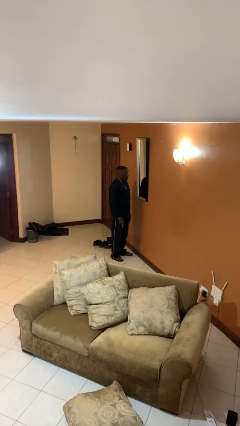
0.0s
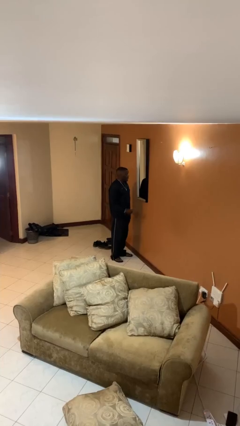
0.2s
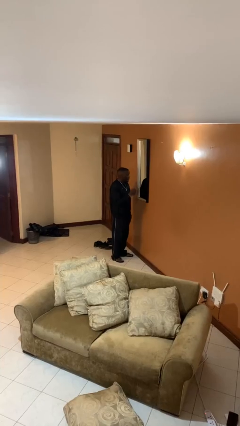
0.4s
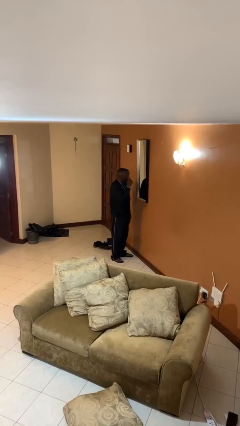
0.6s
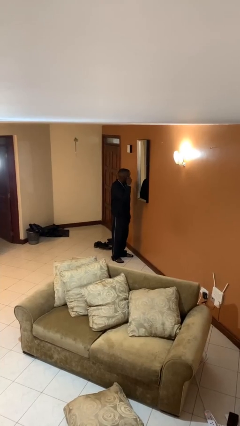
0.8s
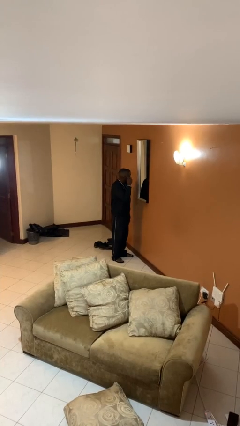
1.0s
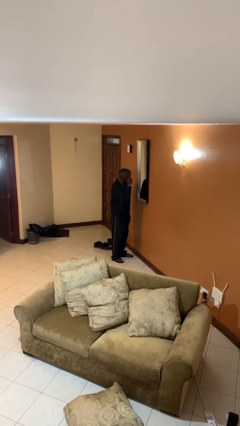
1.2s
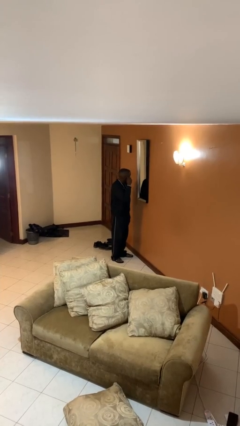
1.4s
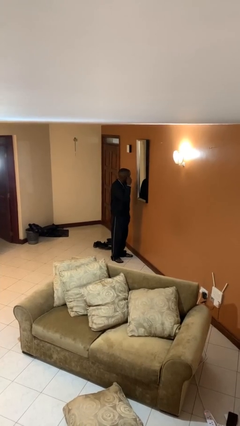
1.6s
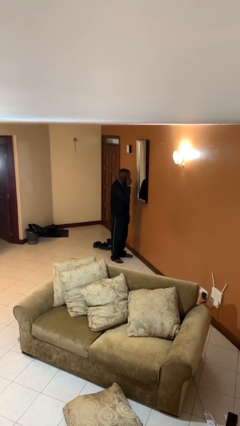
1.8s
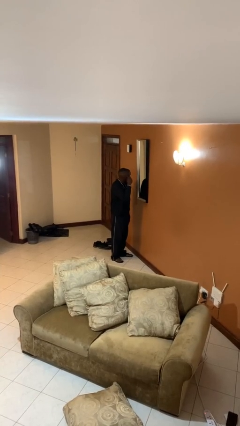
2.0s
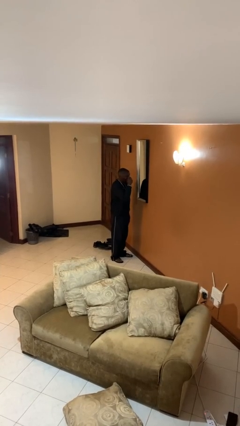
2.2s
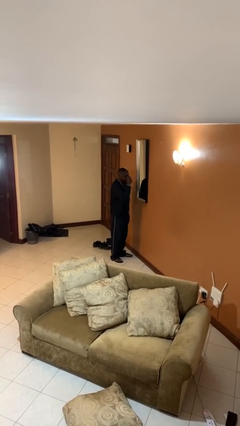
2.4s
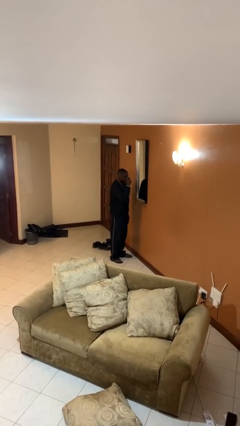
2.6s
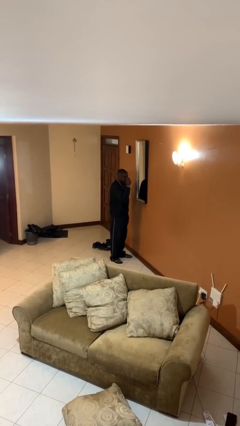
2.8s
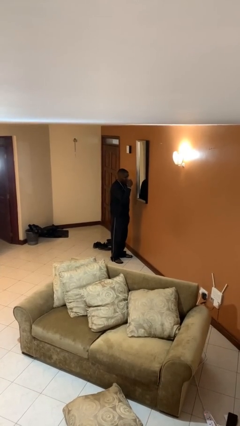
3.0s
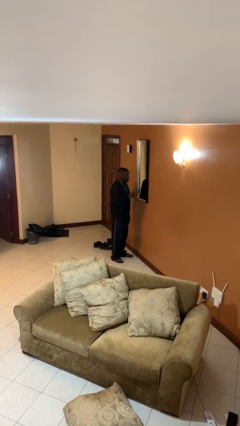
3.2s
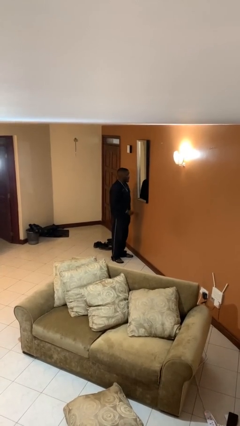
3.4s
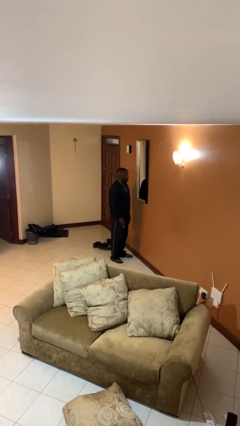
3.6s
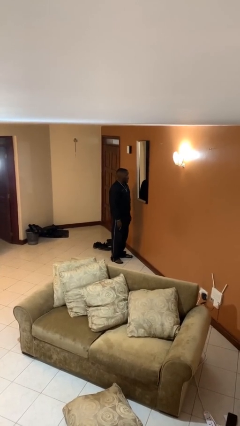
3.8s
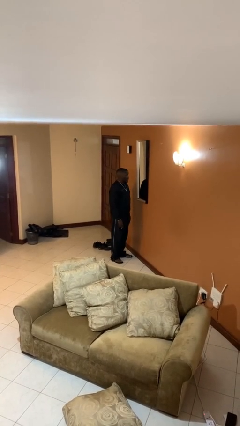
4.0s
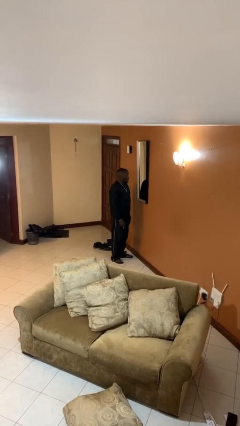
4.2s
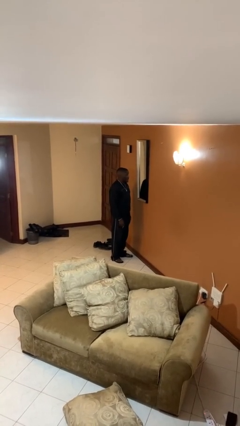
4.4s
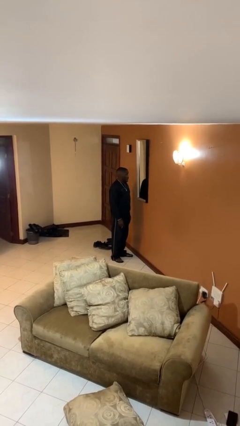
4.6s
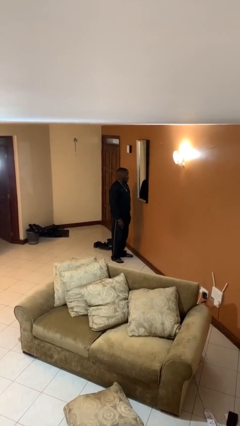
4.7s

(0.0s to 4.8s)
person applies eye makeup

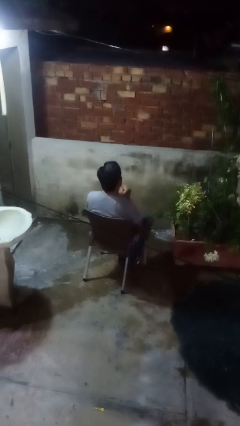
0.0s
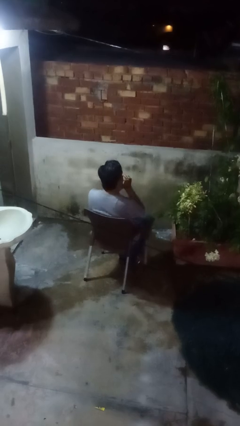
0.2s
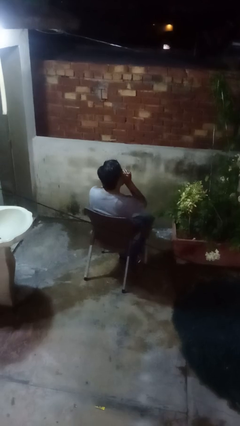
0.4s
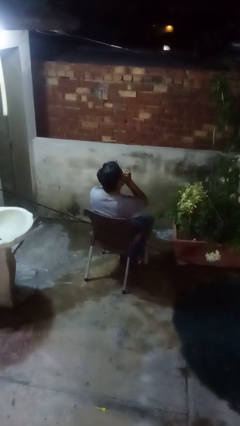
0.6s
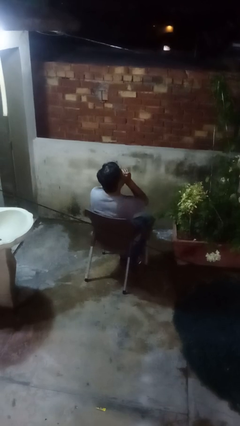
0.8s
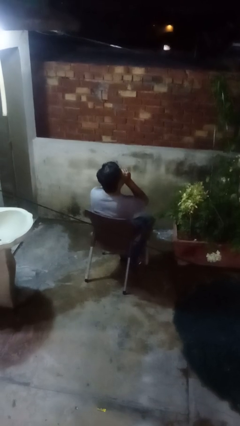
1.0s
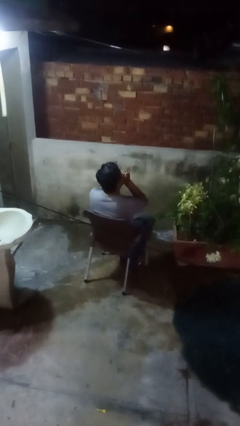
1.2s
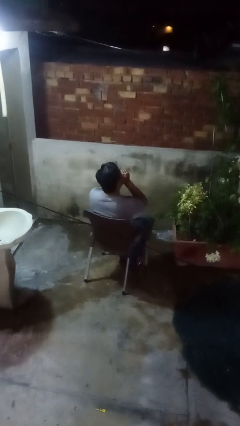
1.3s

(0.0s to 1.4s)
person blows into hands

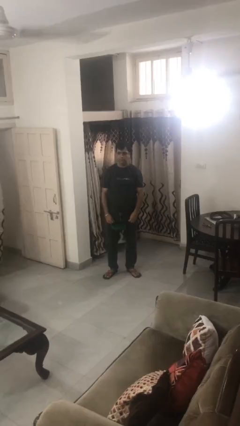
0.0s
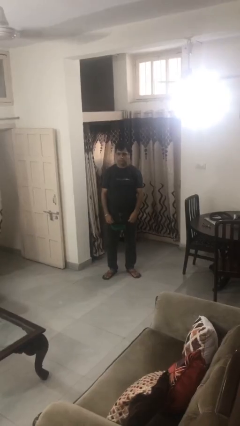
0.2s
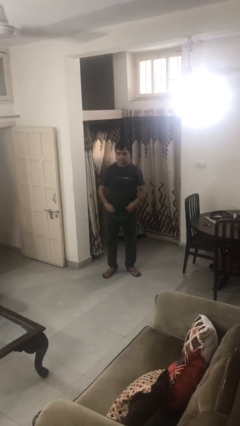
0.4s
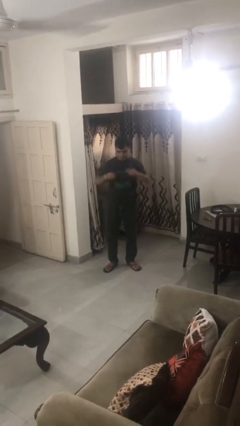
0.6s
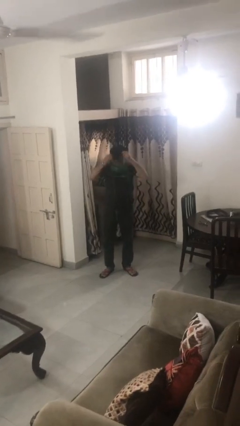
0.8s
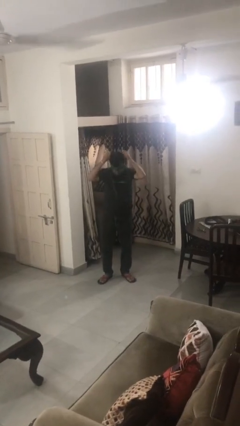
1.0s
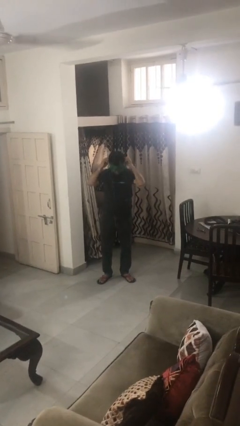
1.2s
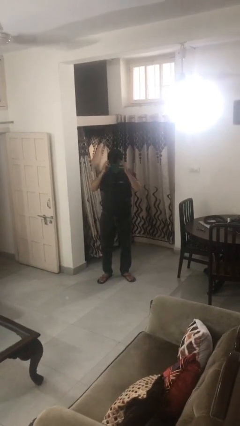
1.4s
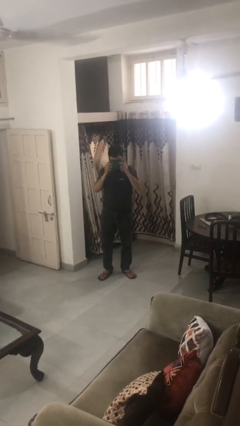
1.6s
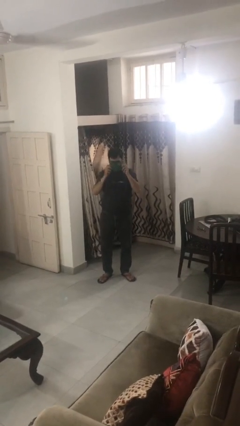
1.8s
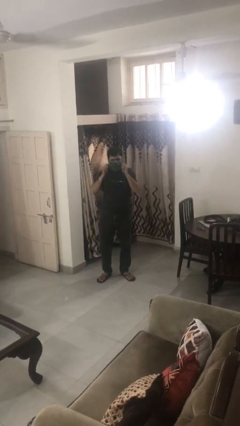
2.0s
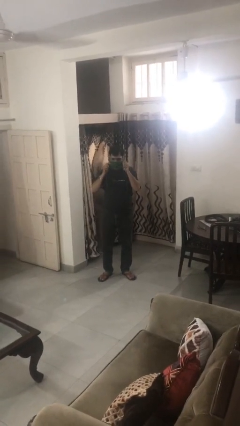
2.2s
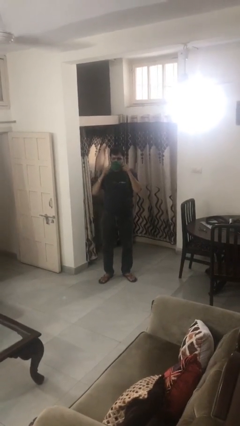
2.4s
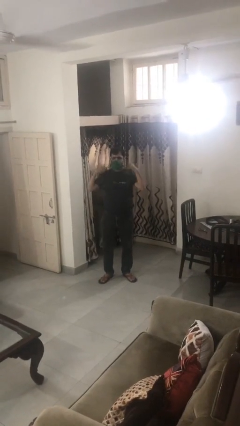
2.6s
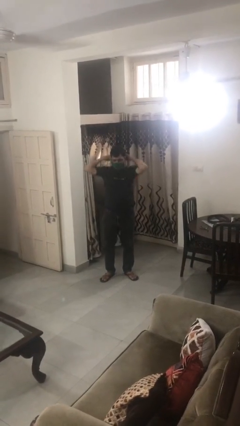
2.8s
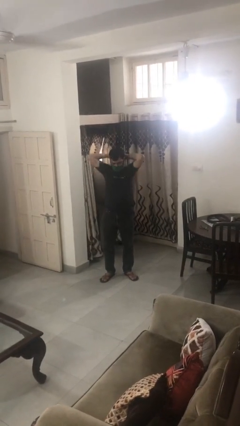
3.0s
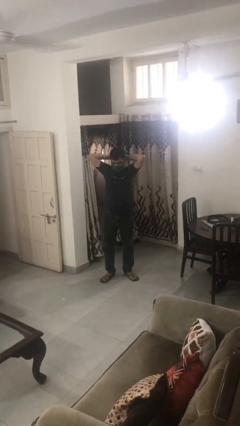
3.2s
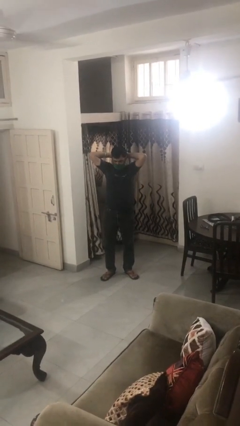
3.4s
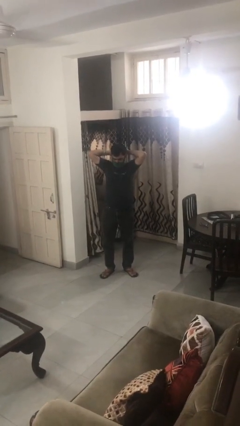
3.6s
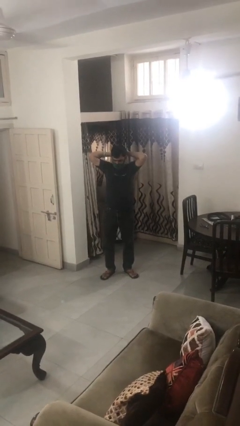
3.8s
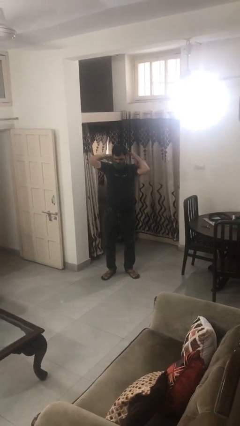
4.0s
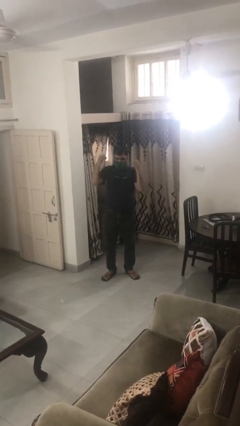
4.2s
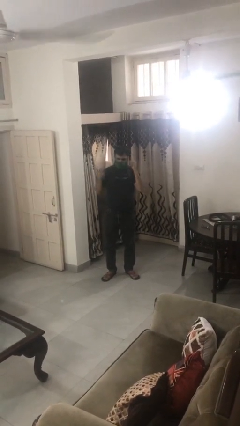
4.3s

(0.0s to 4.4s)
person puts on facemask

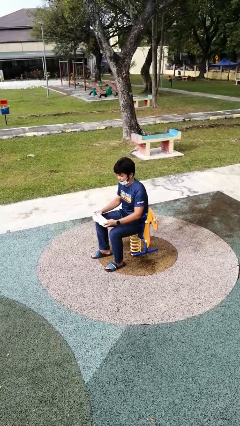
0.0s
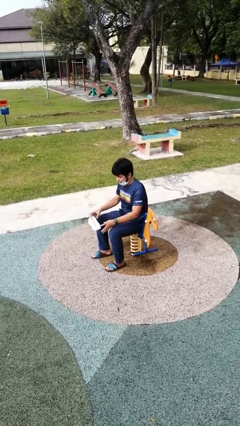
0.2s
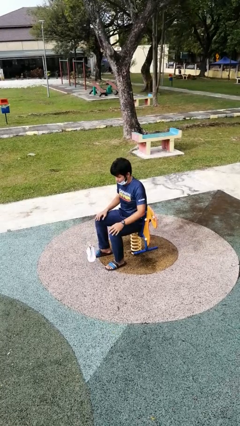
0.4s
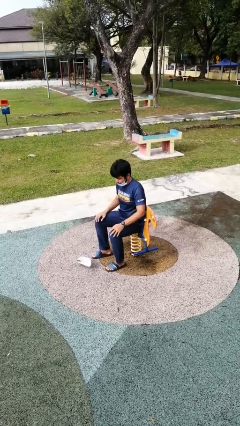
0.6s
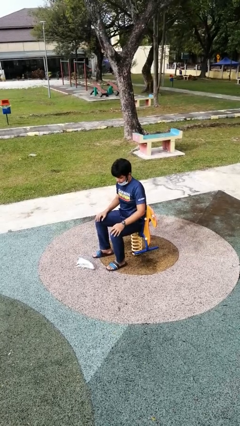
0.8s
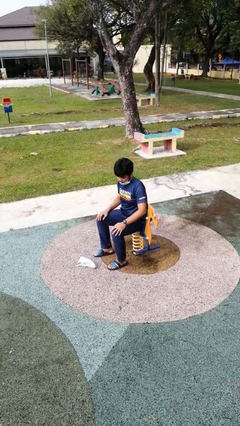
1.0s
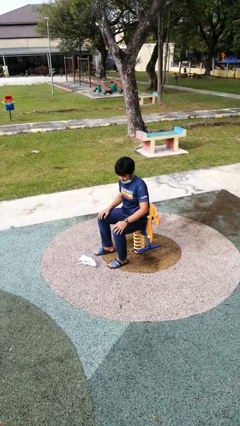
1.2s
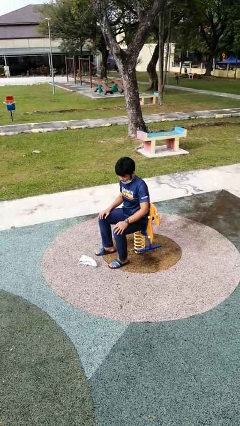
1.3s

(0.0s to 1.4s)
person drops object

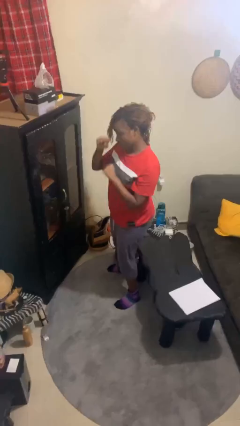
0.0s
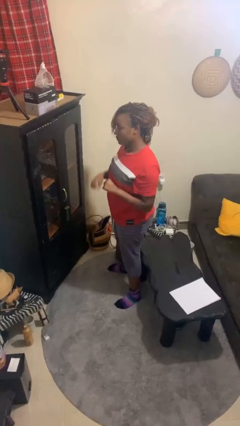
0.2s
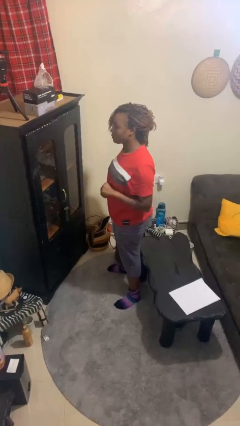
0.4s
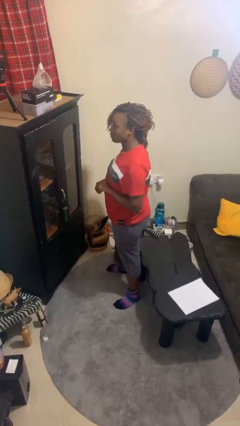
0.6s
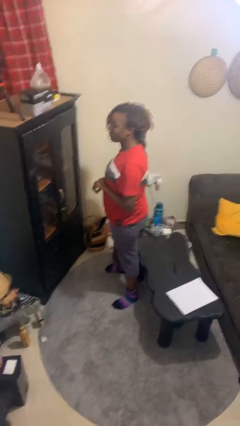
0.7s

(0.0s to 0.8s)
person punches

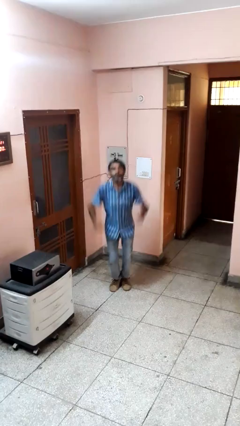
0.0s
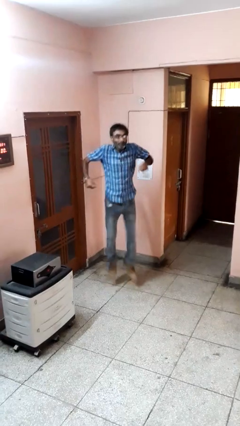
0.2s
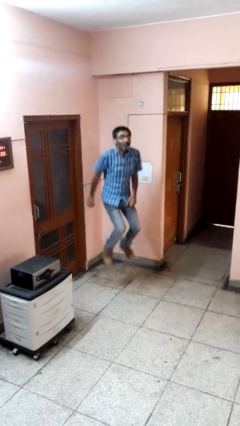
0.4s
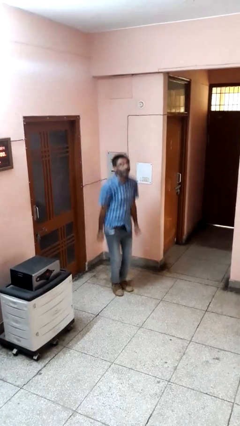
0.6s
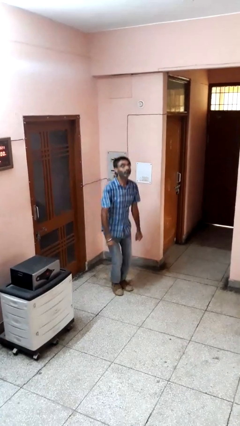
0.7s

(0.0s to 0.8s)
person jumps

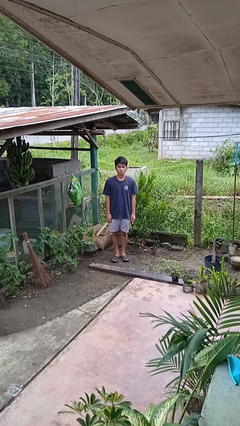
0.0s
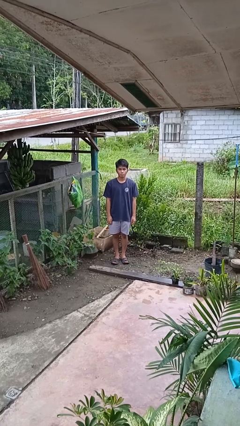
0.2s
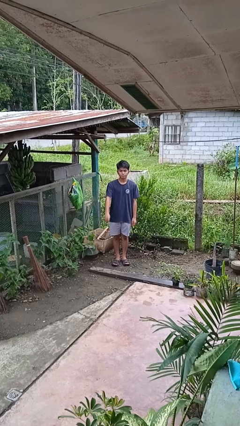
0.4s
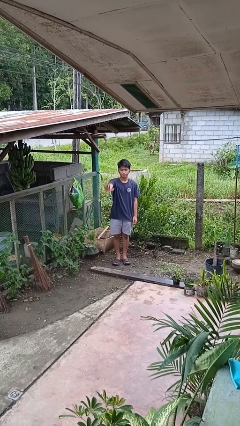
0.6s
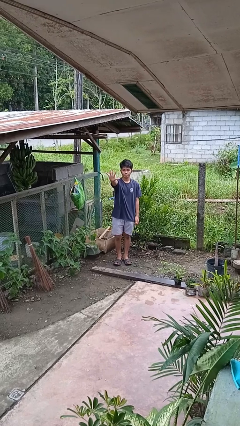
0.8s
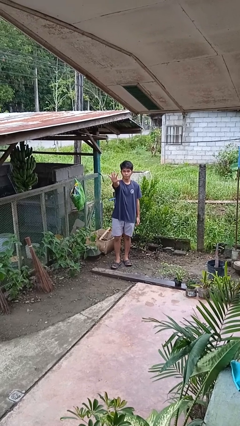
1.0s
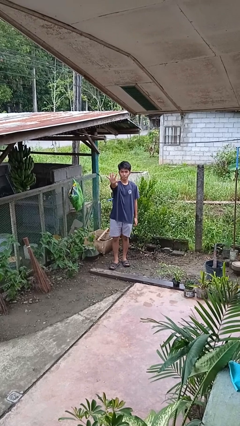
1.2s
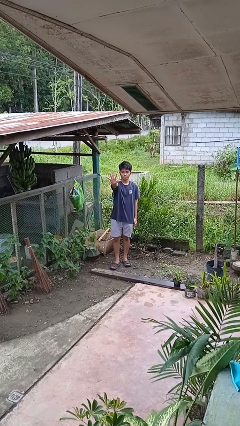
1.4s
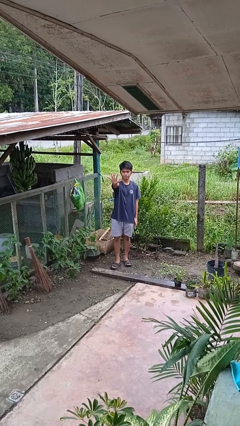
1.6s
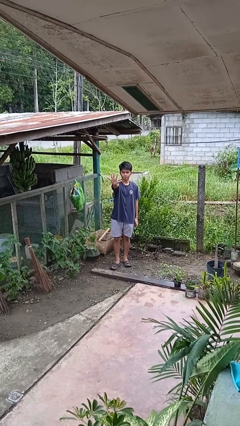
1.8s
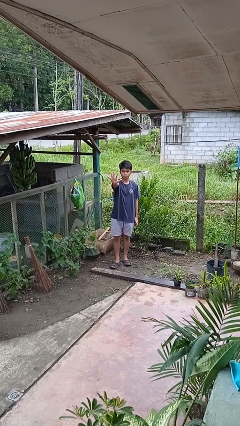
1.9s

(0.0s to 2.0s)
person gestures number five

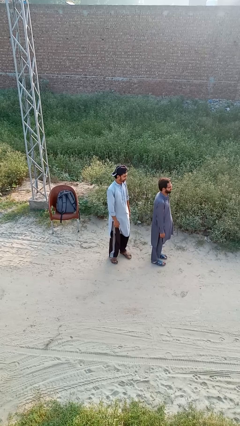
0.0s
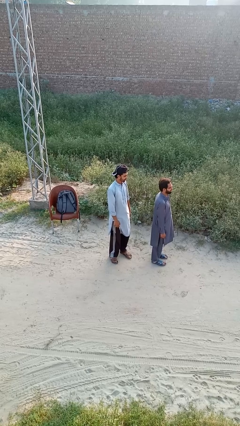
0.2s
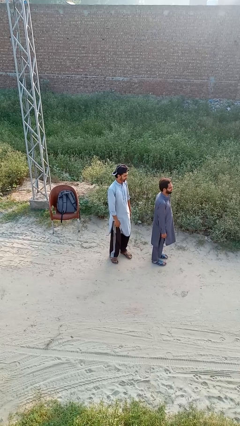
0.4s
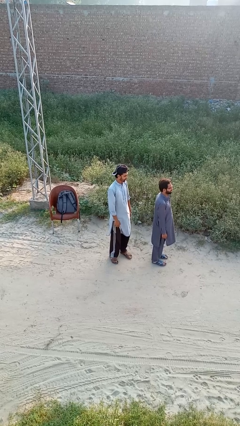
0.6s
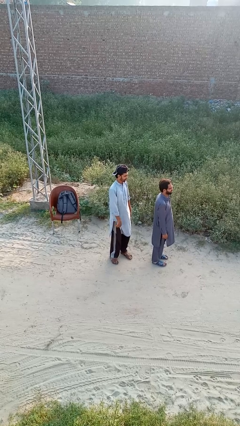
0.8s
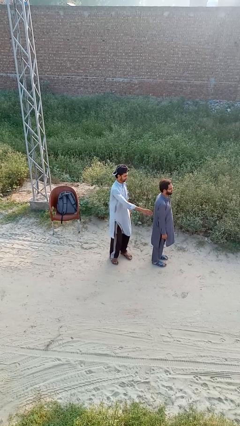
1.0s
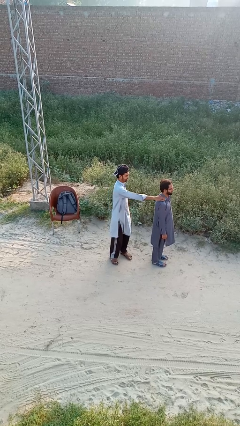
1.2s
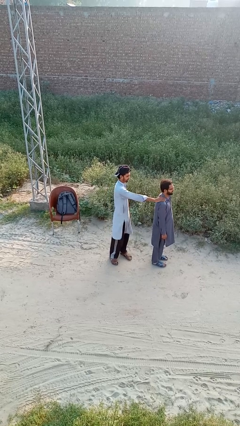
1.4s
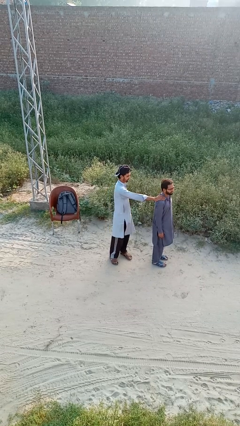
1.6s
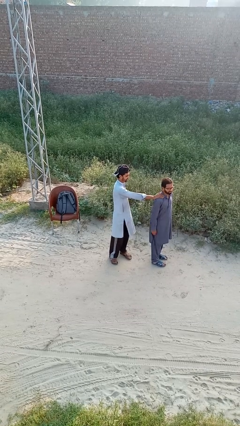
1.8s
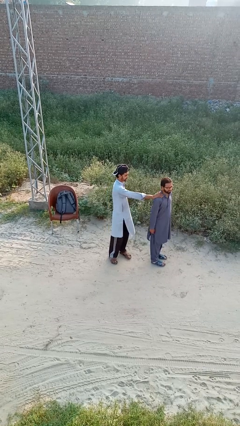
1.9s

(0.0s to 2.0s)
person grabs person by shoulder
